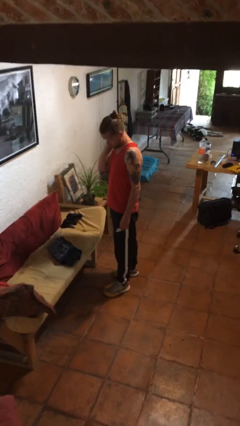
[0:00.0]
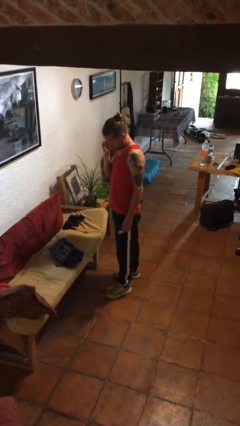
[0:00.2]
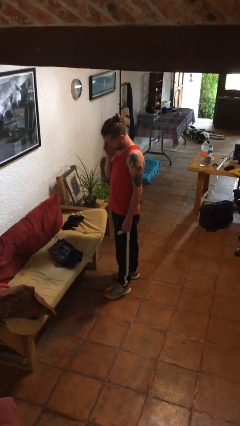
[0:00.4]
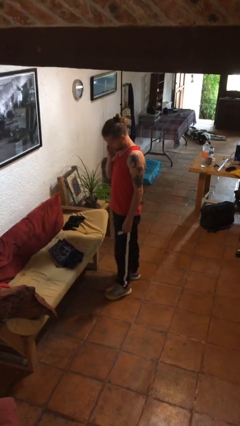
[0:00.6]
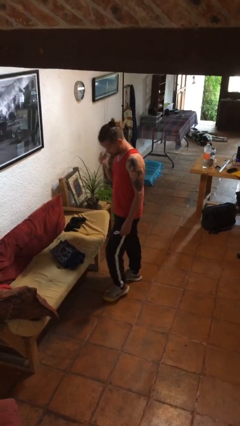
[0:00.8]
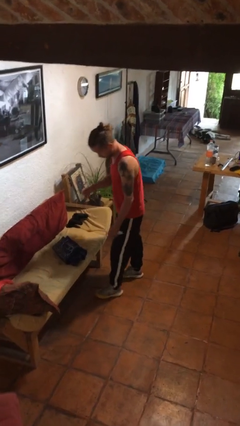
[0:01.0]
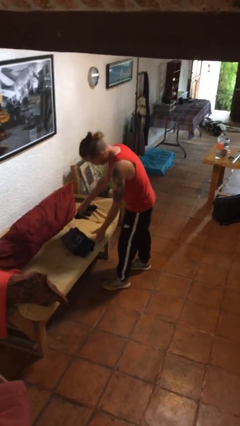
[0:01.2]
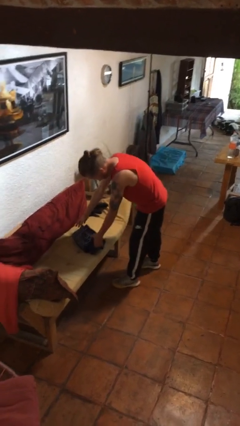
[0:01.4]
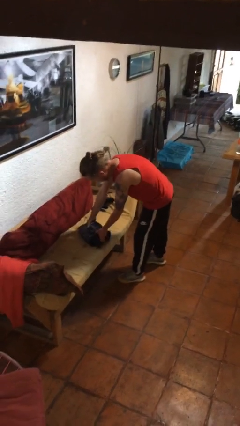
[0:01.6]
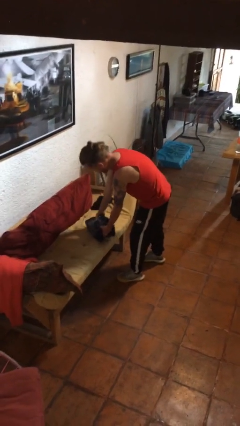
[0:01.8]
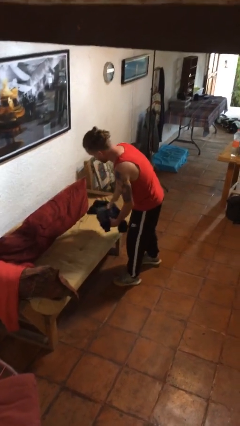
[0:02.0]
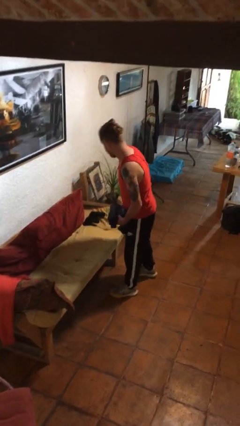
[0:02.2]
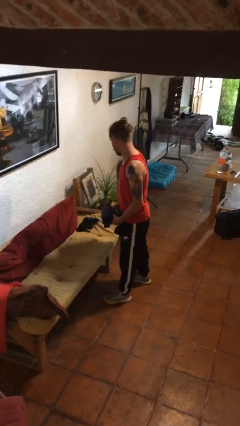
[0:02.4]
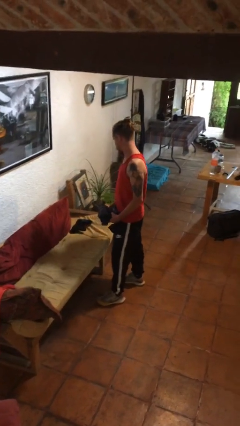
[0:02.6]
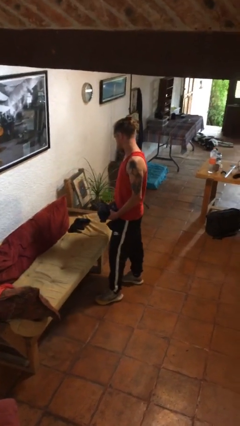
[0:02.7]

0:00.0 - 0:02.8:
person picks up object from couch

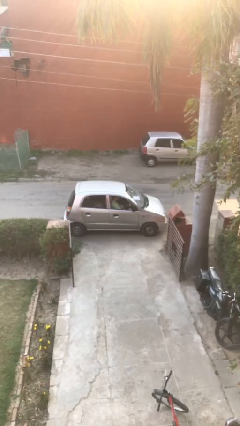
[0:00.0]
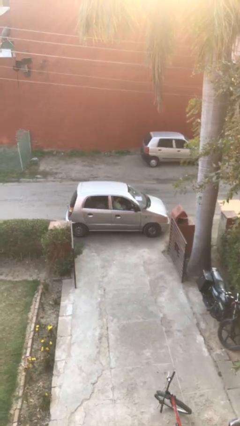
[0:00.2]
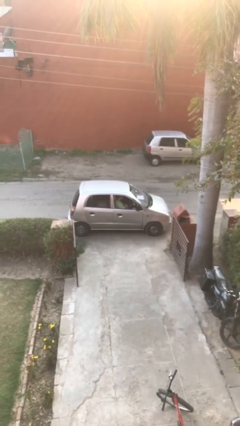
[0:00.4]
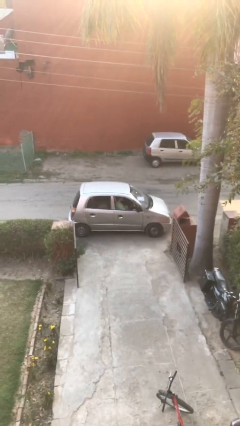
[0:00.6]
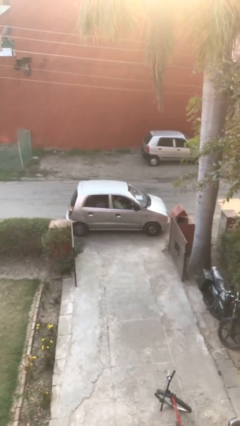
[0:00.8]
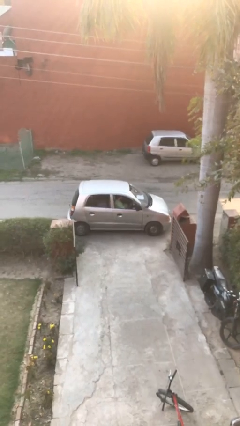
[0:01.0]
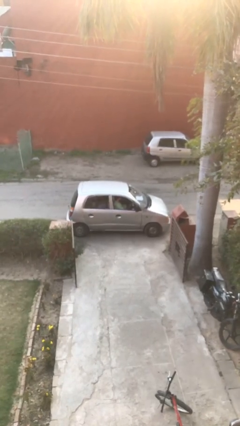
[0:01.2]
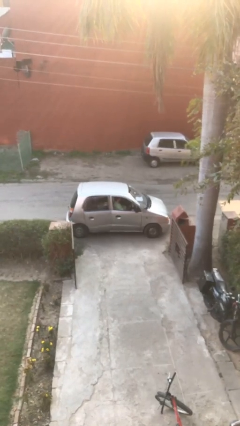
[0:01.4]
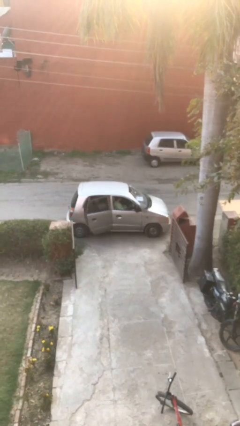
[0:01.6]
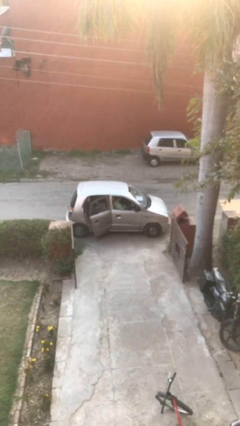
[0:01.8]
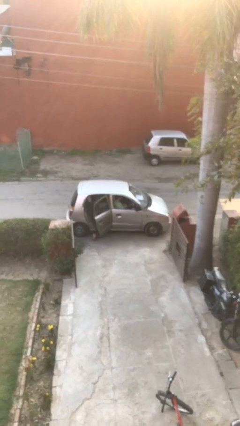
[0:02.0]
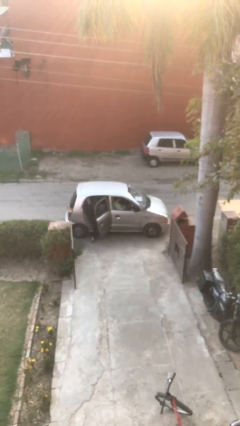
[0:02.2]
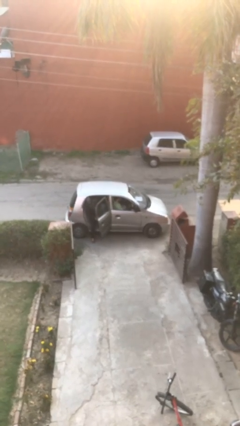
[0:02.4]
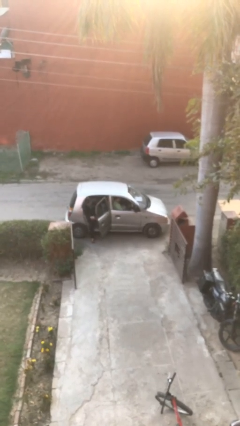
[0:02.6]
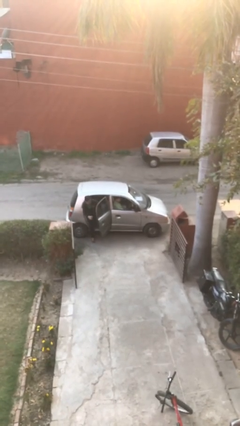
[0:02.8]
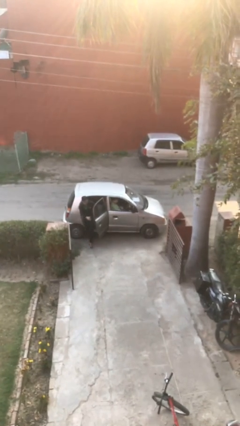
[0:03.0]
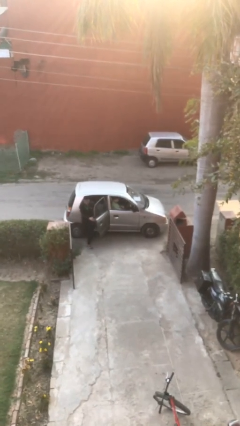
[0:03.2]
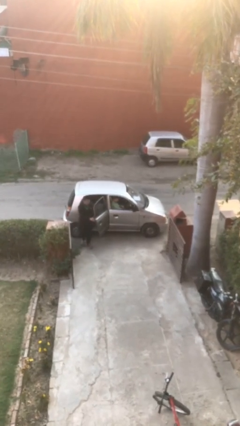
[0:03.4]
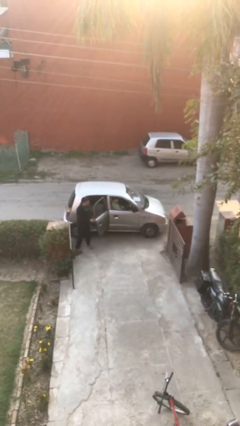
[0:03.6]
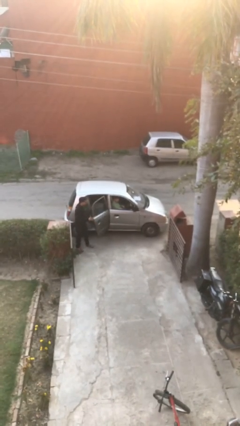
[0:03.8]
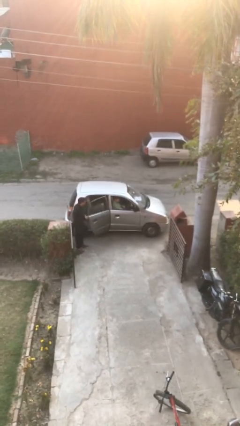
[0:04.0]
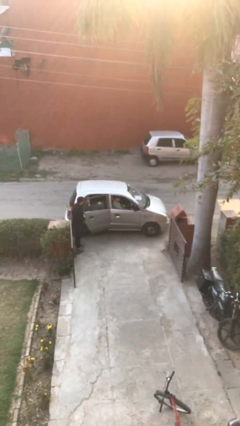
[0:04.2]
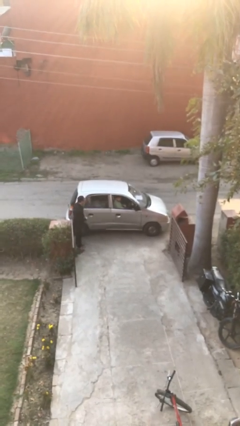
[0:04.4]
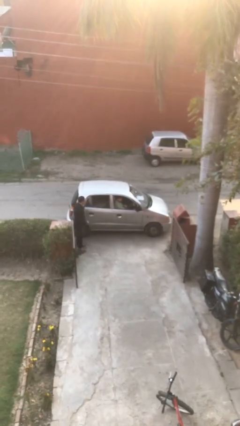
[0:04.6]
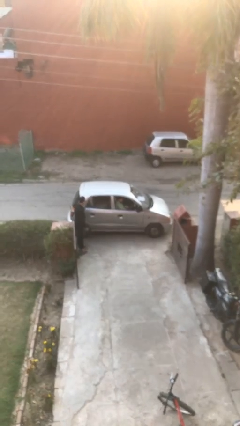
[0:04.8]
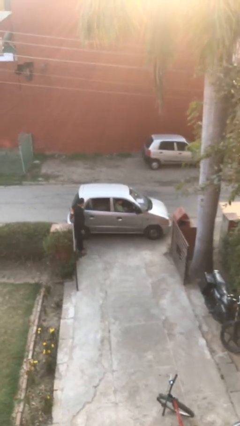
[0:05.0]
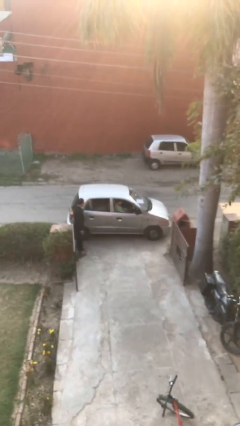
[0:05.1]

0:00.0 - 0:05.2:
car drops off person

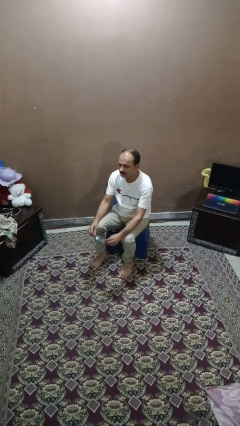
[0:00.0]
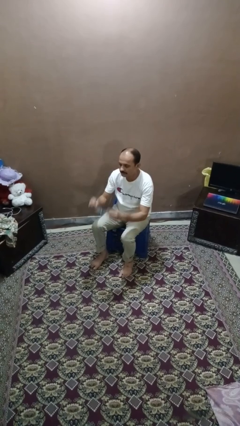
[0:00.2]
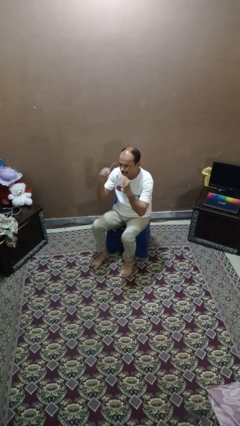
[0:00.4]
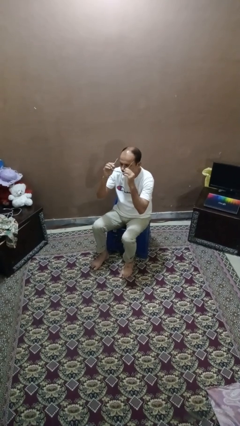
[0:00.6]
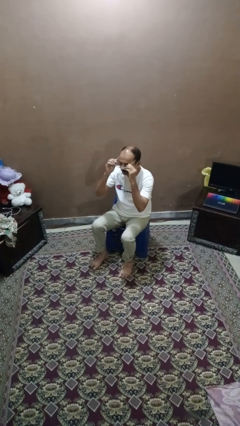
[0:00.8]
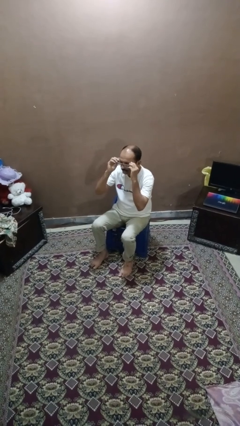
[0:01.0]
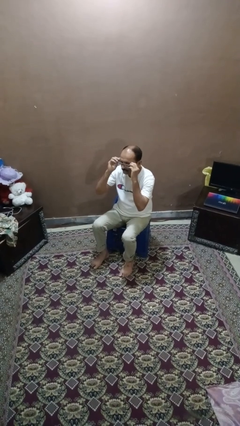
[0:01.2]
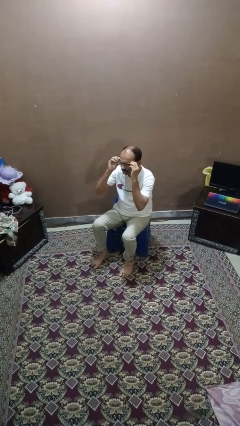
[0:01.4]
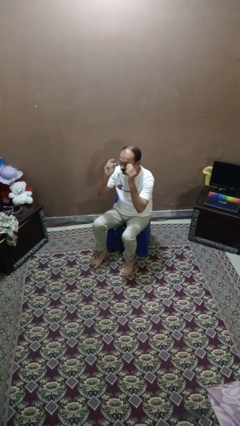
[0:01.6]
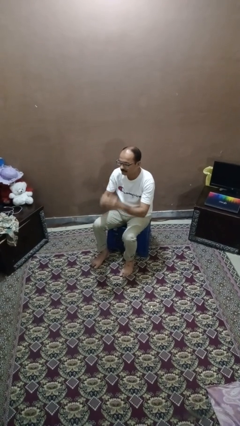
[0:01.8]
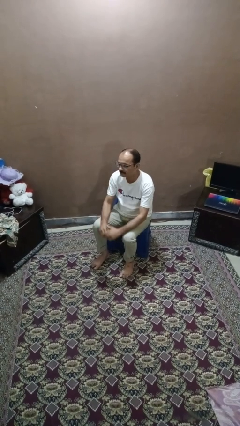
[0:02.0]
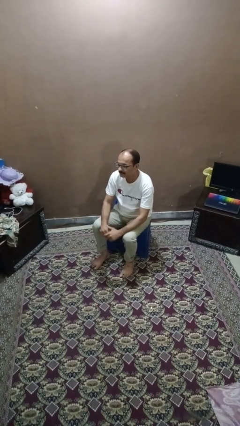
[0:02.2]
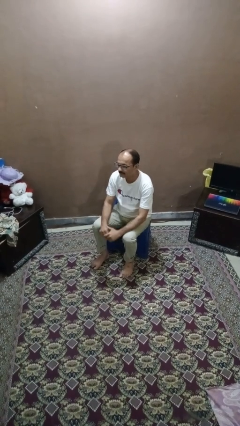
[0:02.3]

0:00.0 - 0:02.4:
person puts on glasses

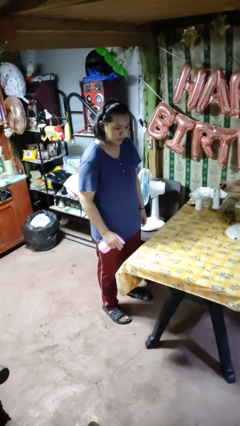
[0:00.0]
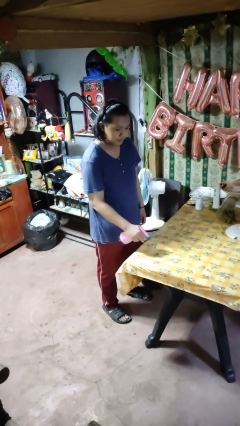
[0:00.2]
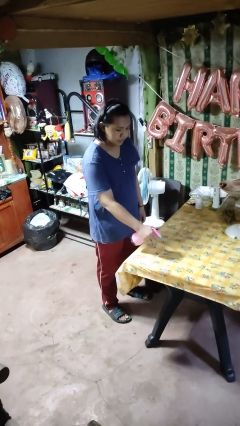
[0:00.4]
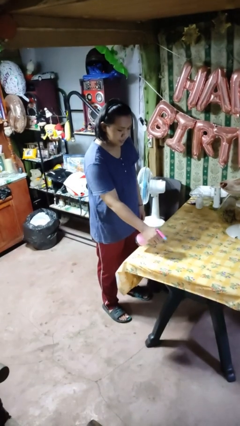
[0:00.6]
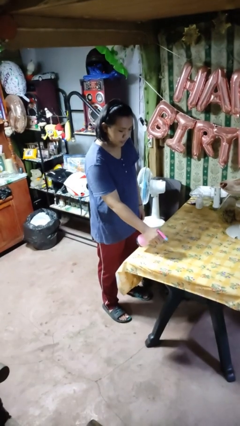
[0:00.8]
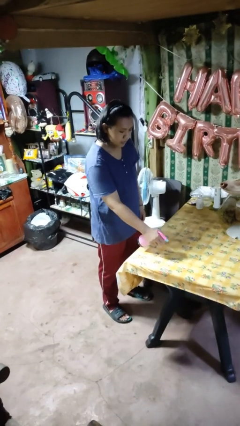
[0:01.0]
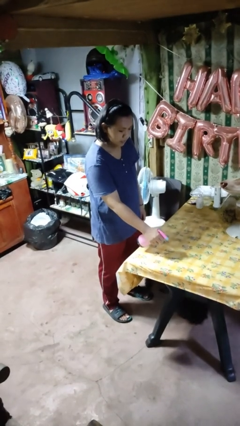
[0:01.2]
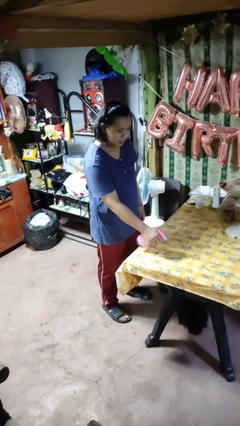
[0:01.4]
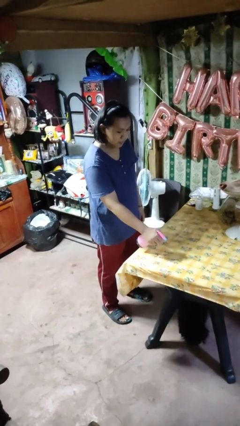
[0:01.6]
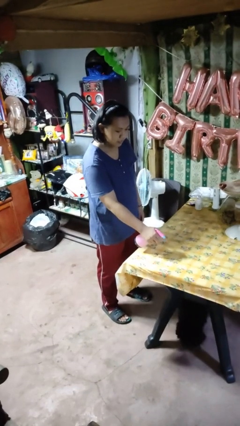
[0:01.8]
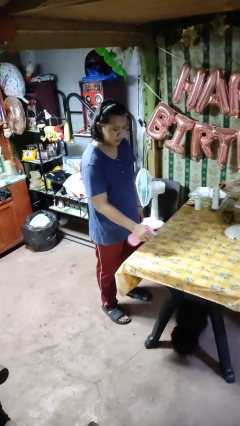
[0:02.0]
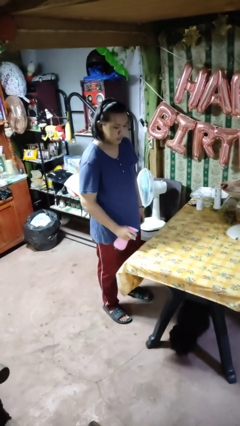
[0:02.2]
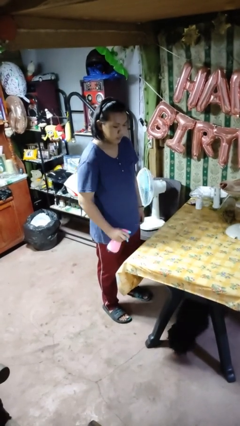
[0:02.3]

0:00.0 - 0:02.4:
person sprays from bottle

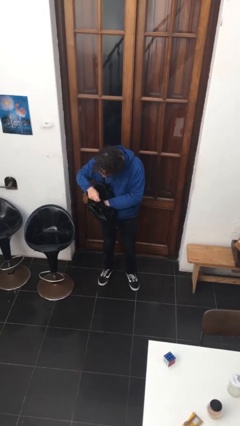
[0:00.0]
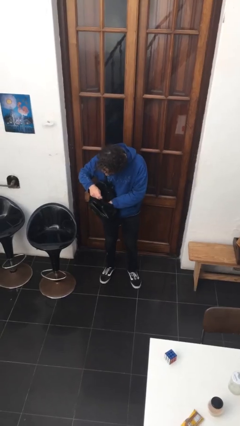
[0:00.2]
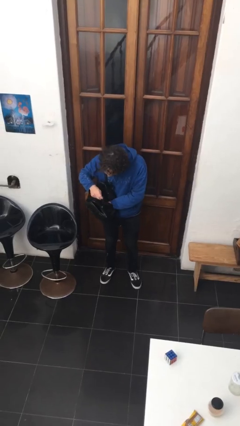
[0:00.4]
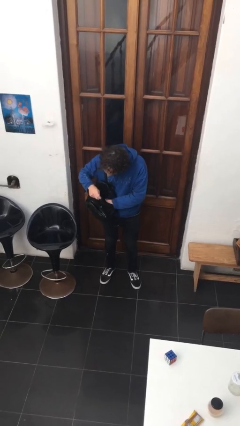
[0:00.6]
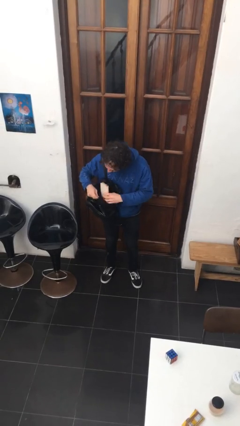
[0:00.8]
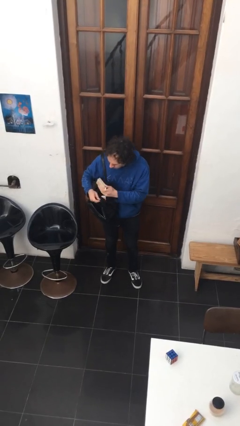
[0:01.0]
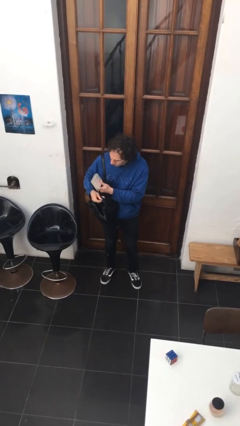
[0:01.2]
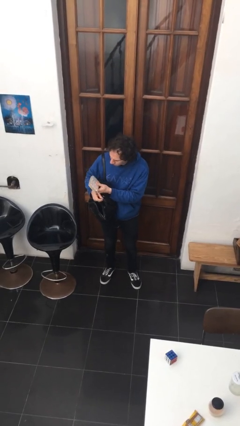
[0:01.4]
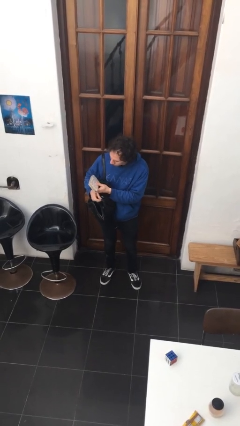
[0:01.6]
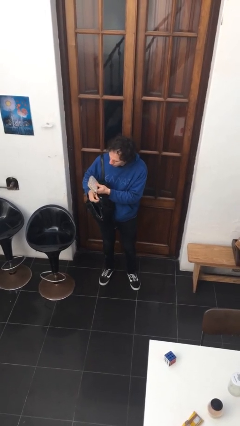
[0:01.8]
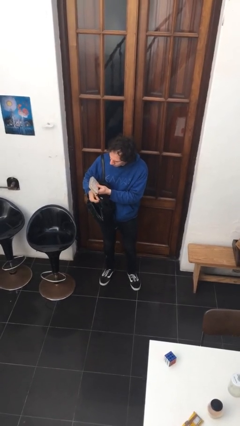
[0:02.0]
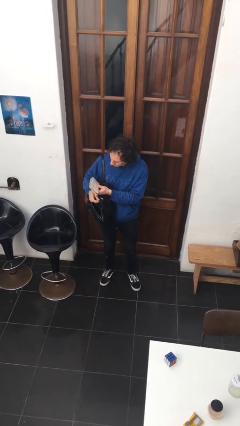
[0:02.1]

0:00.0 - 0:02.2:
person takes object from purse

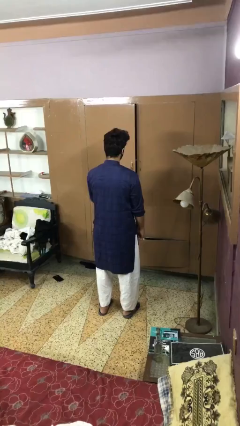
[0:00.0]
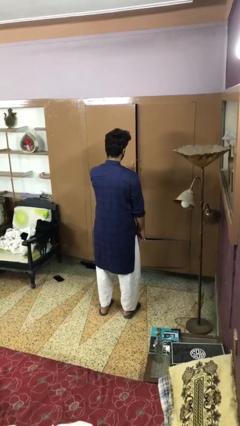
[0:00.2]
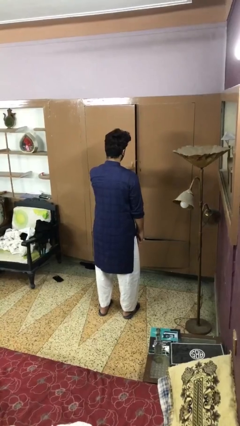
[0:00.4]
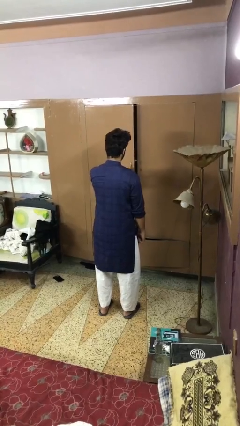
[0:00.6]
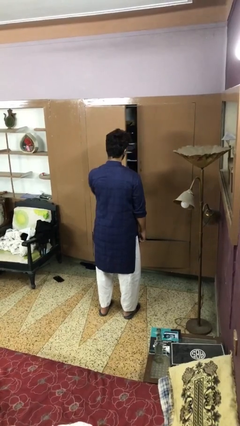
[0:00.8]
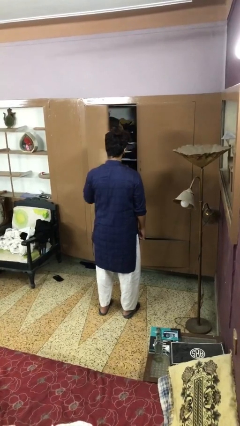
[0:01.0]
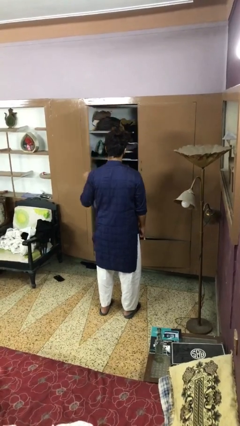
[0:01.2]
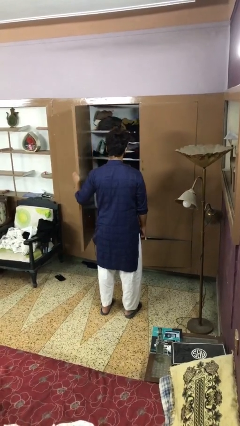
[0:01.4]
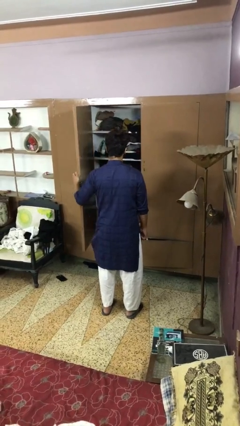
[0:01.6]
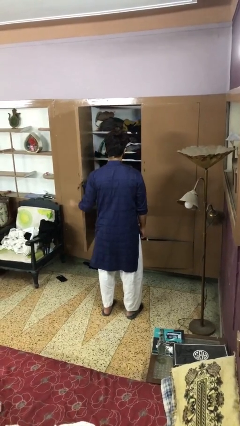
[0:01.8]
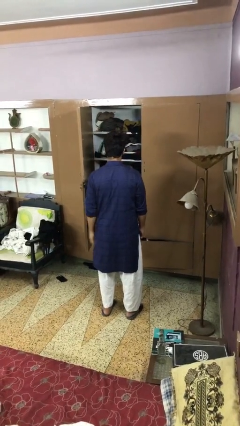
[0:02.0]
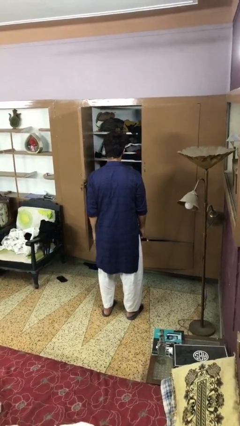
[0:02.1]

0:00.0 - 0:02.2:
person opens closet door
